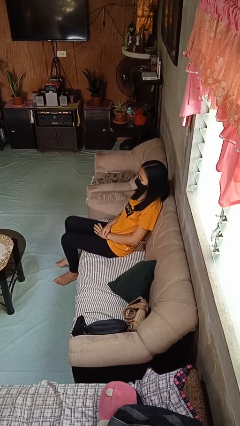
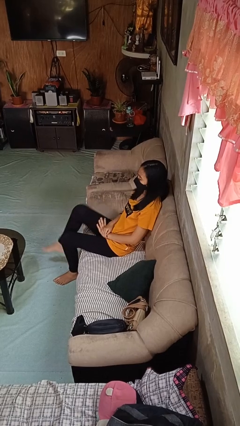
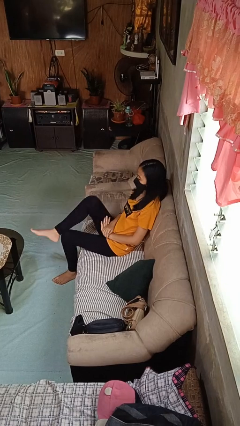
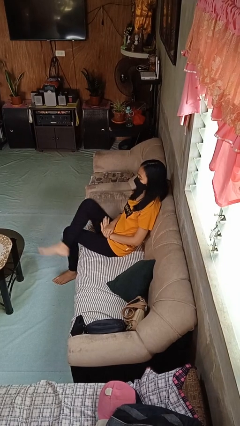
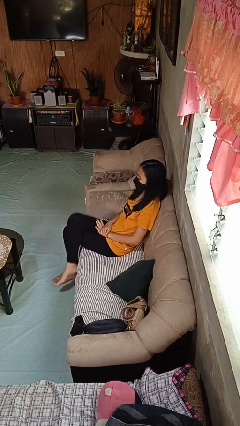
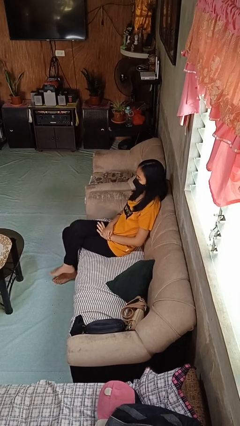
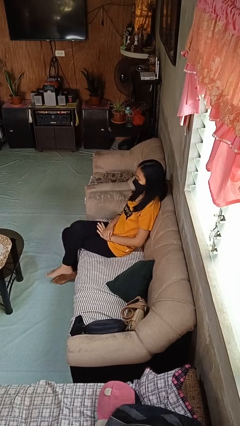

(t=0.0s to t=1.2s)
person crosses legs

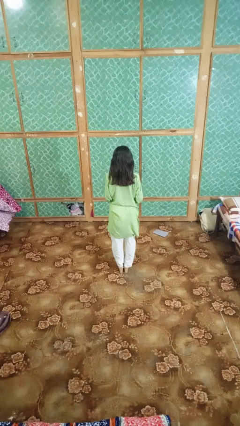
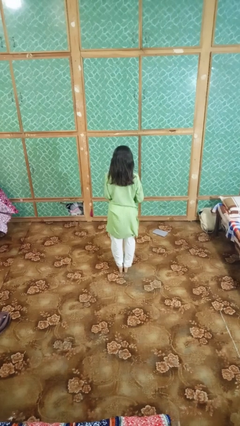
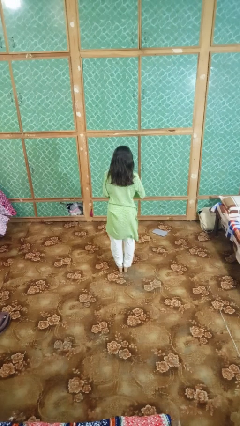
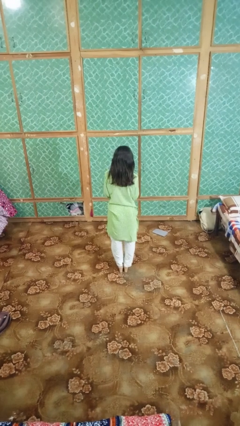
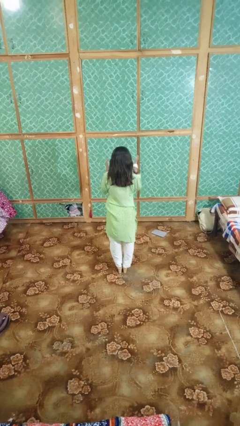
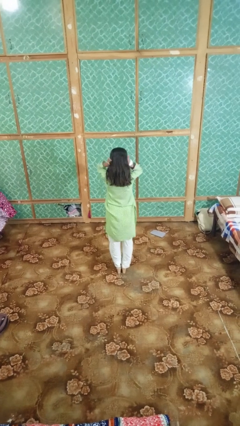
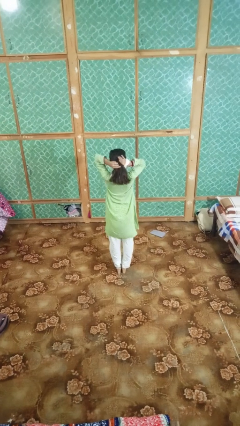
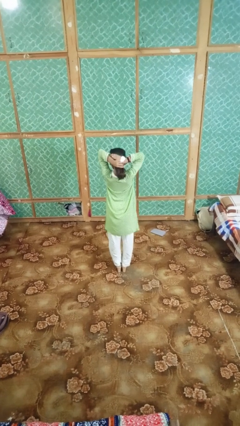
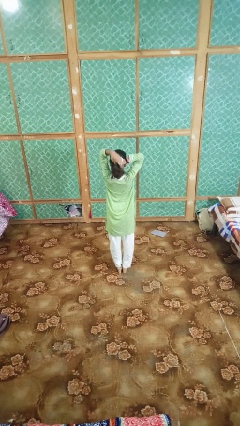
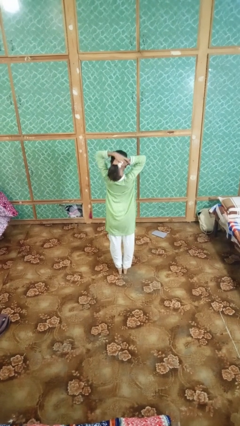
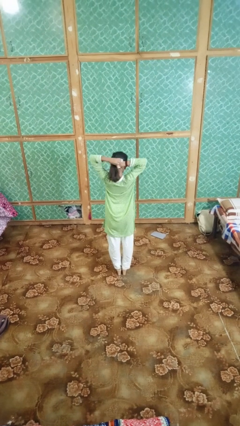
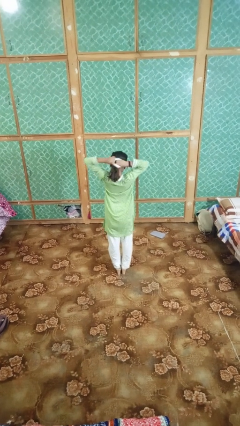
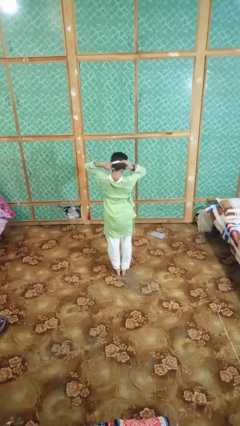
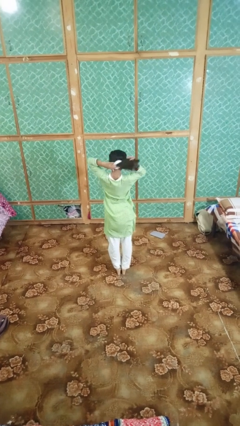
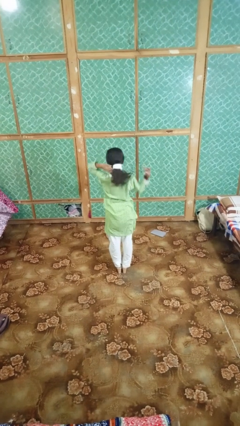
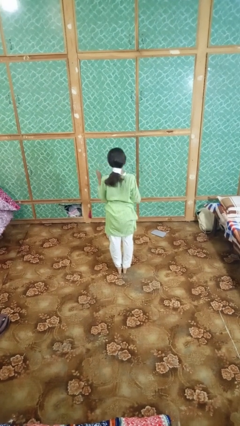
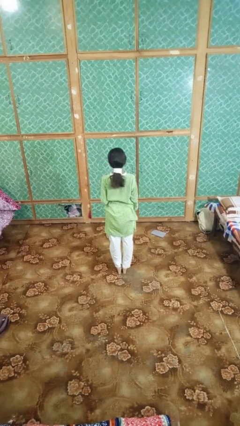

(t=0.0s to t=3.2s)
person puts hair in ponytail

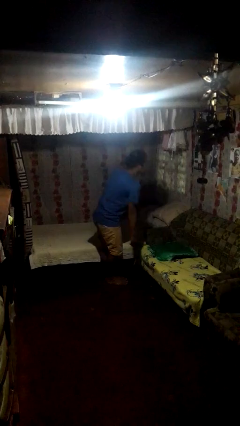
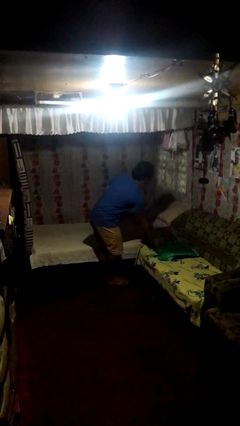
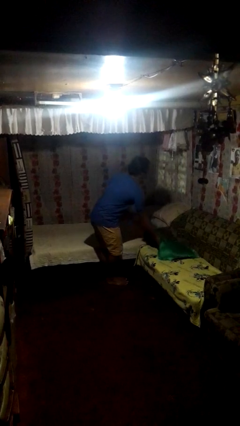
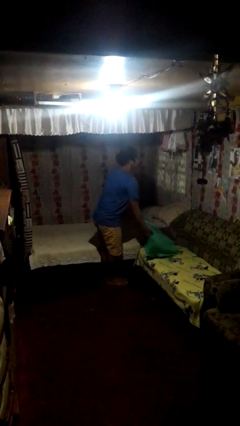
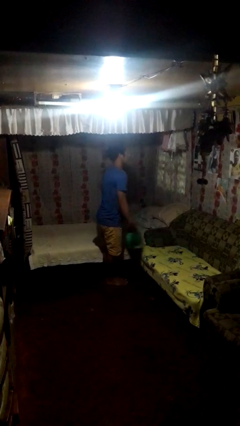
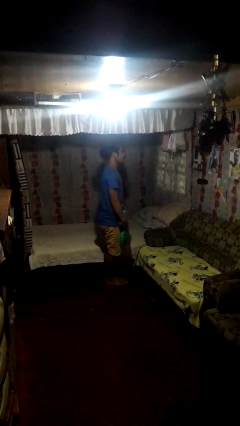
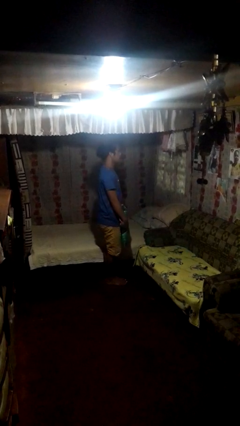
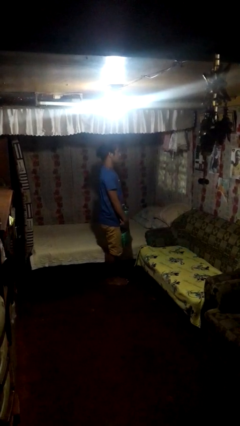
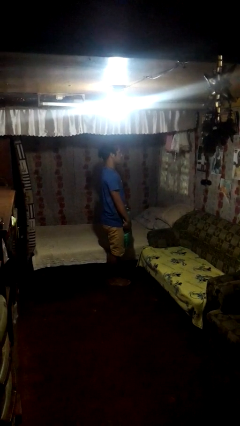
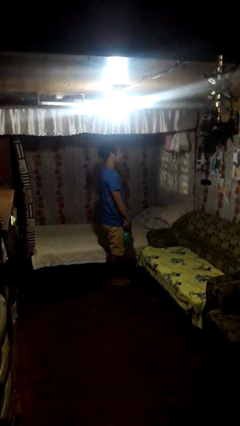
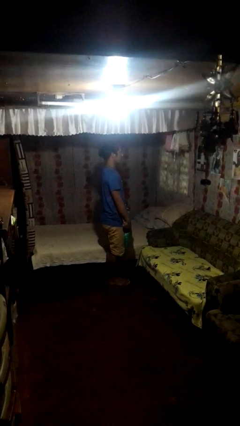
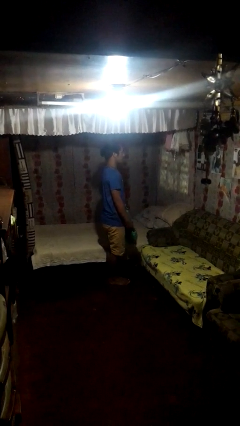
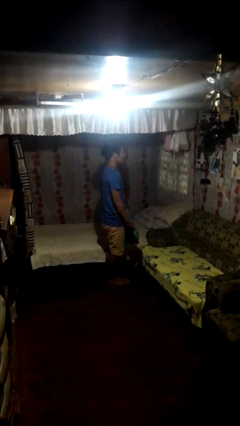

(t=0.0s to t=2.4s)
person picks up object from couch

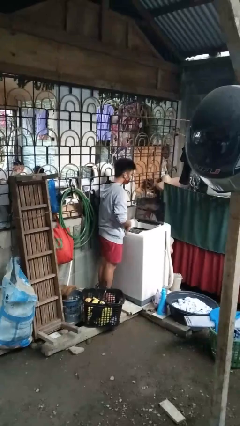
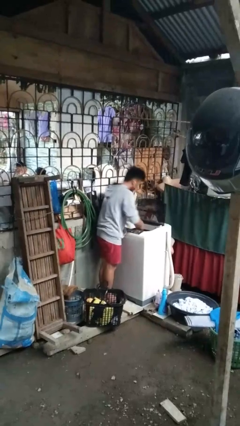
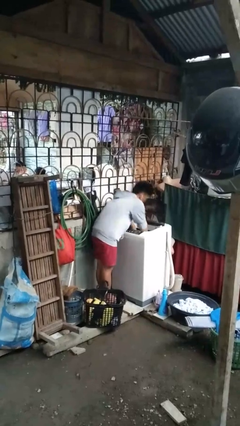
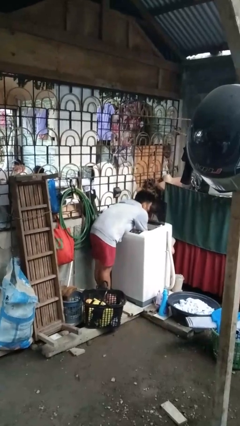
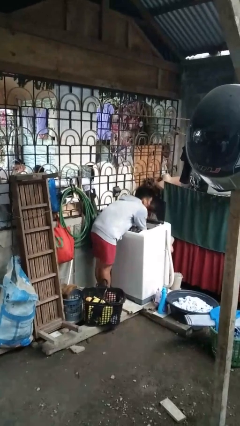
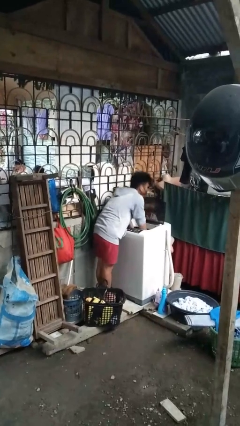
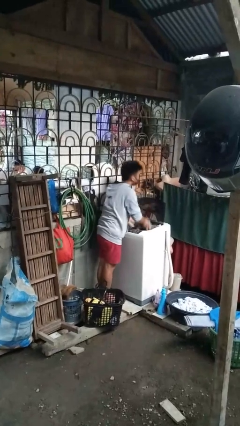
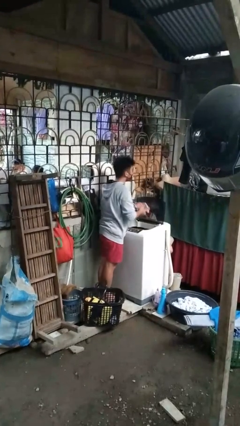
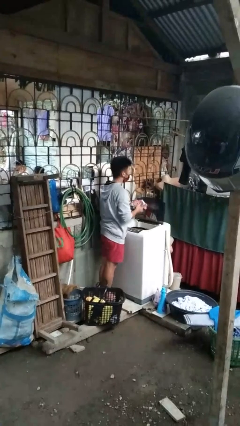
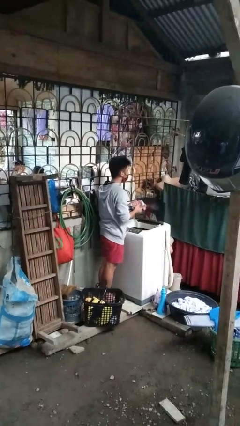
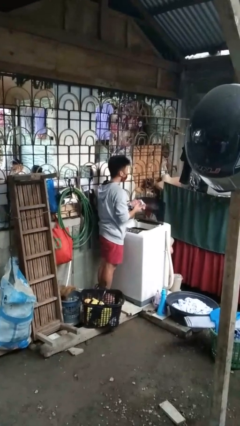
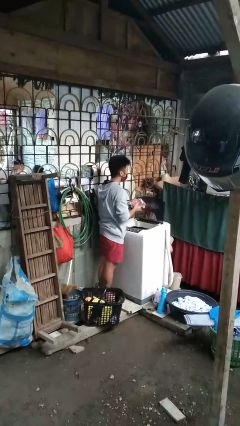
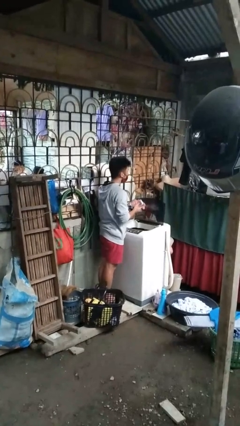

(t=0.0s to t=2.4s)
person unloads clotheswasher

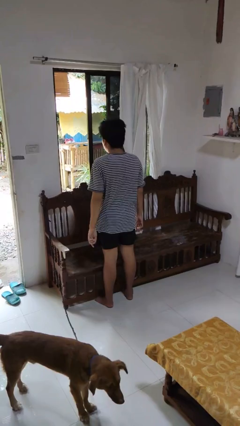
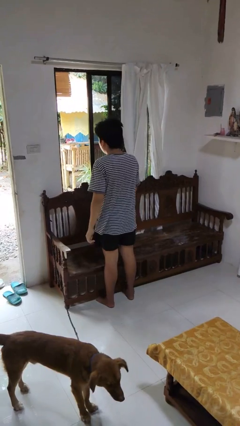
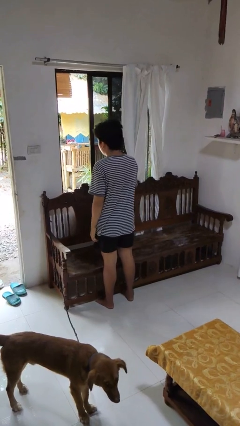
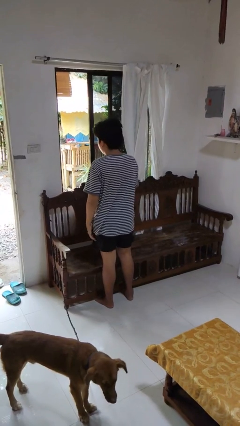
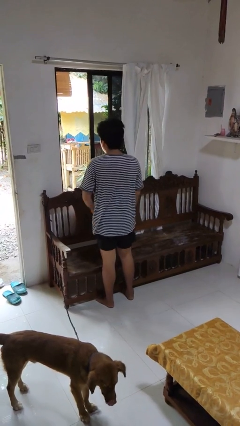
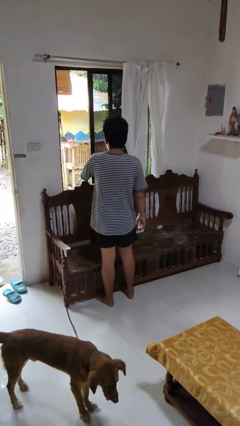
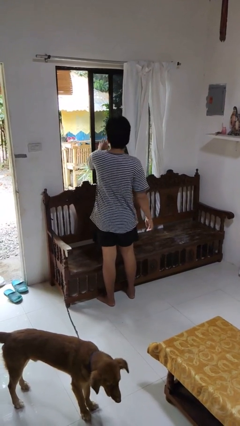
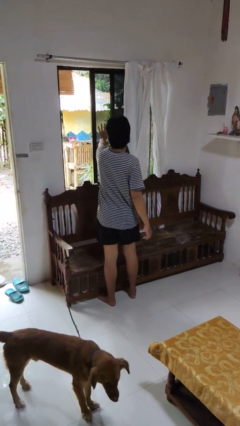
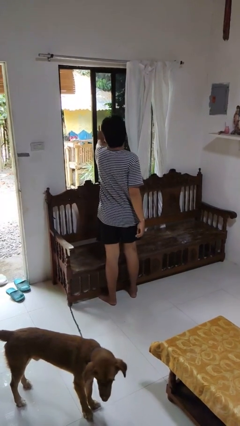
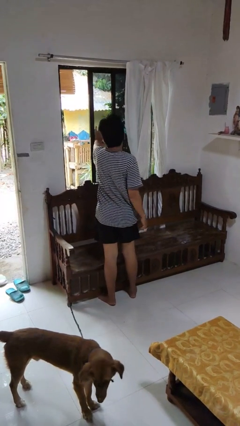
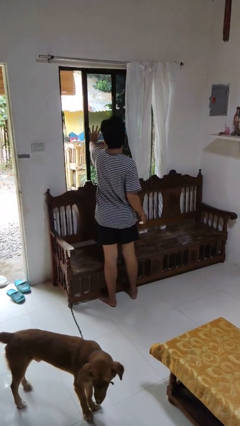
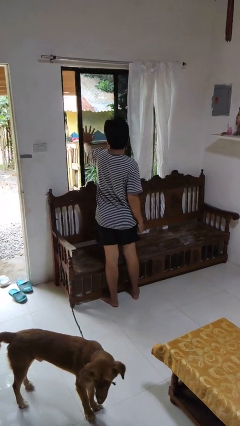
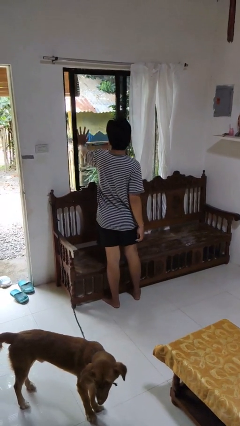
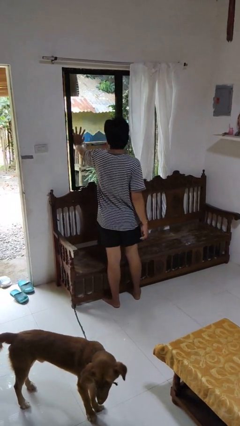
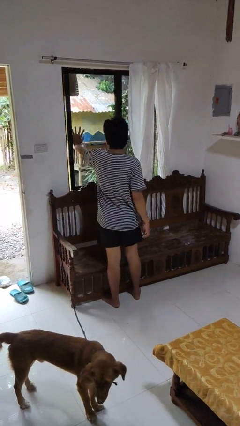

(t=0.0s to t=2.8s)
person closes home window

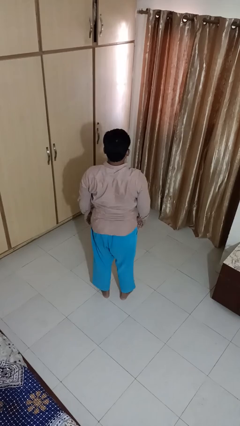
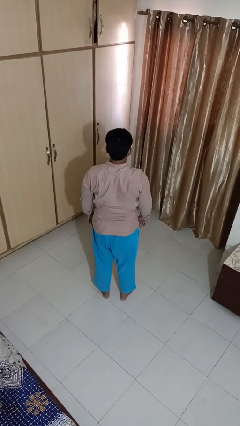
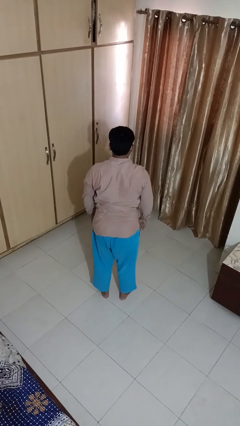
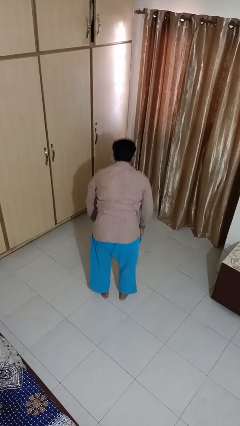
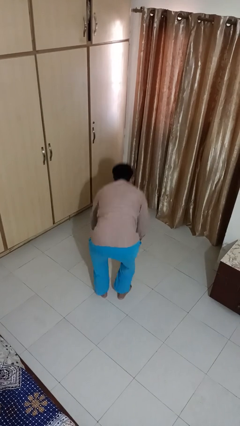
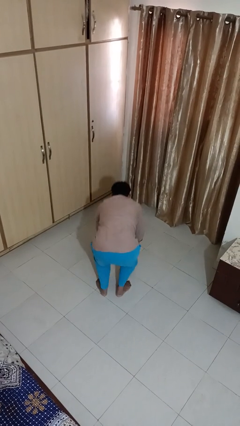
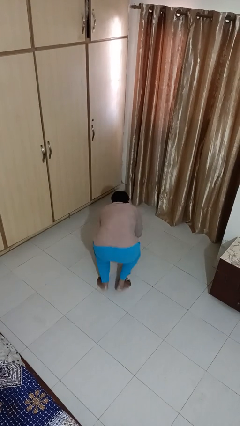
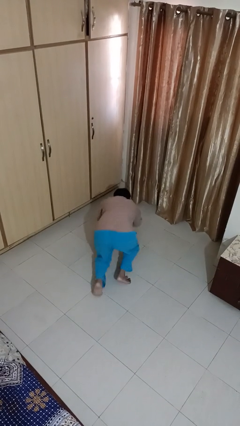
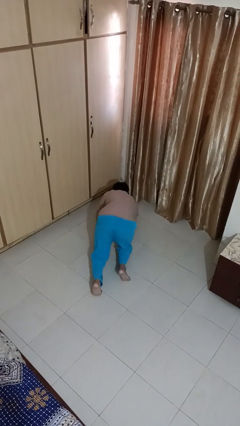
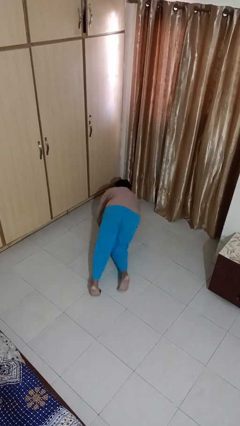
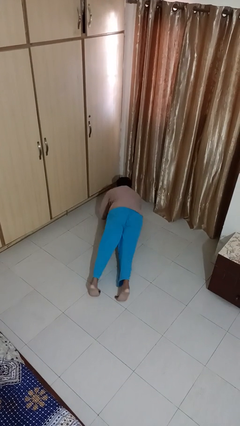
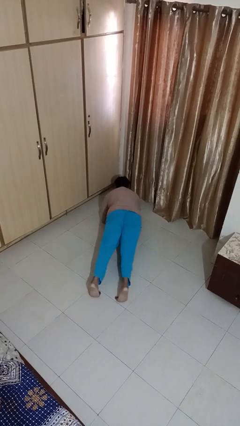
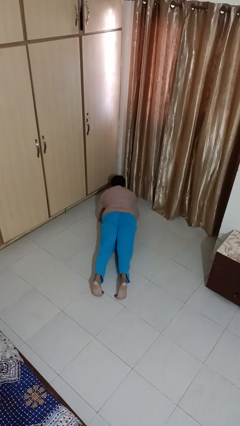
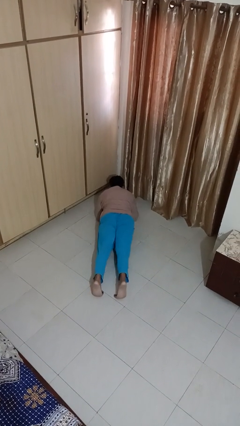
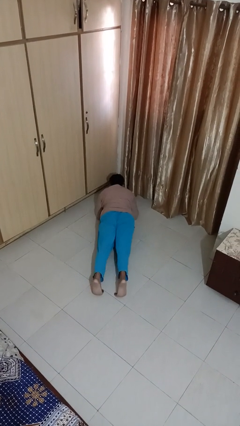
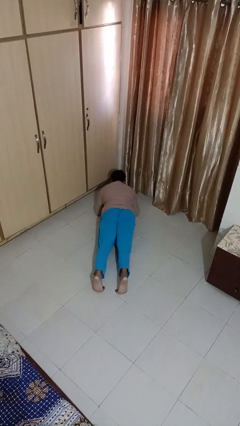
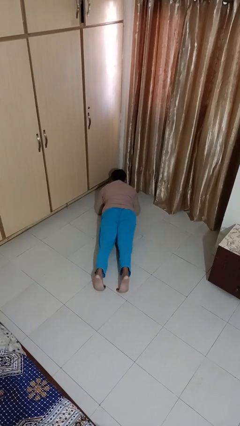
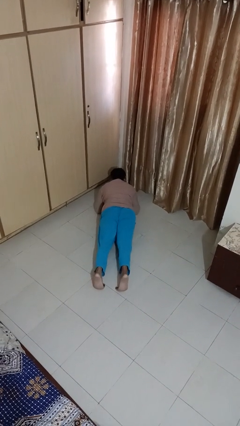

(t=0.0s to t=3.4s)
person exercises with plank

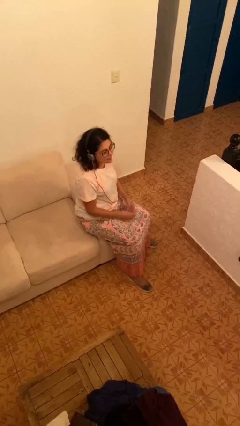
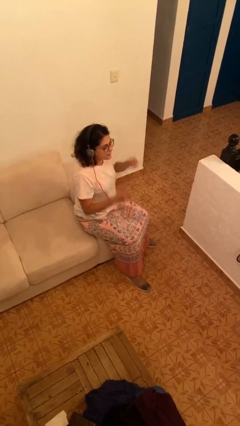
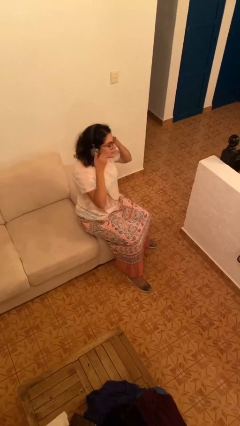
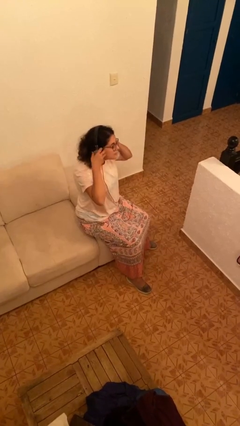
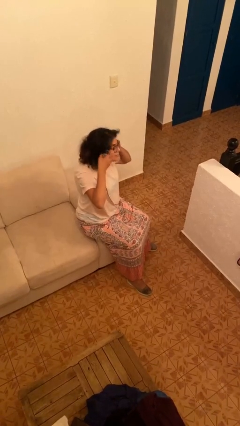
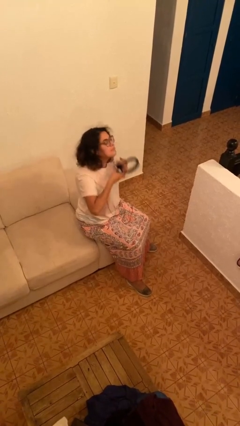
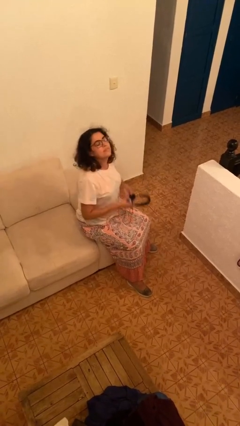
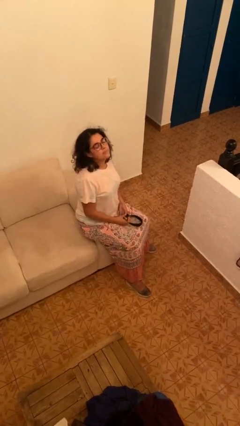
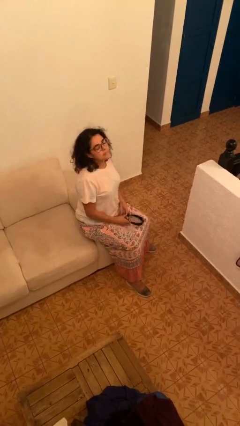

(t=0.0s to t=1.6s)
person takes off headphones
